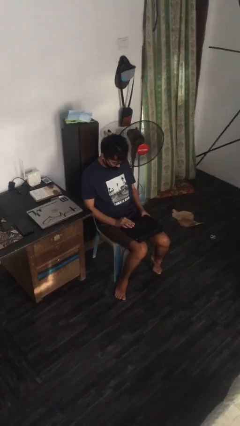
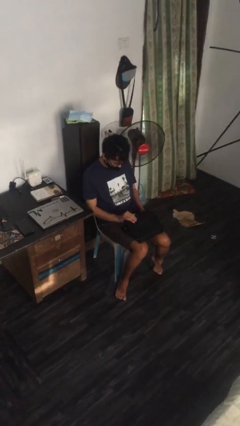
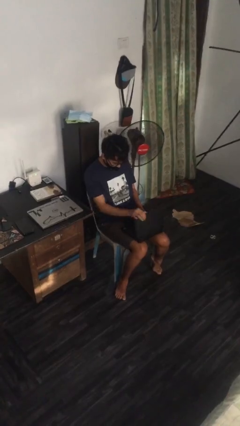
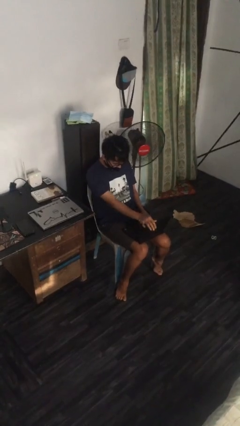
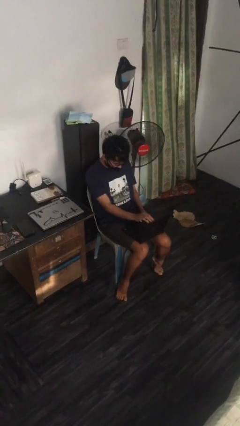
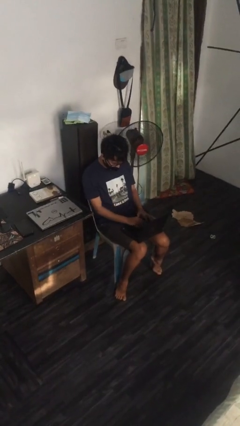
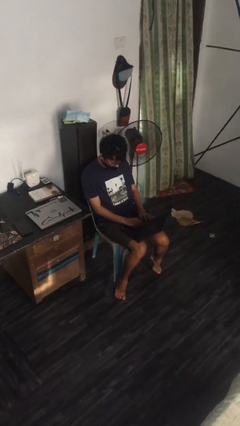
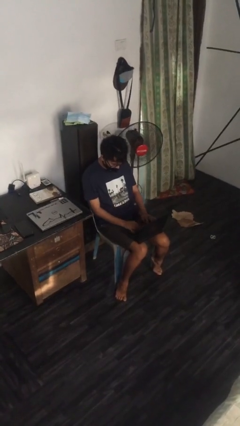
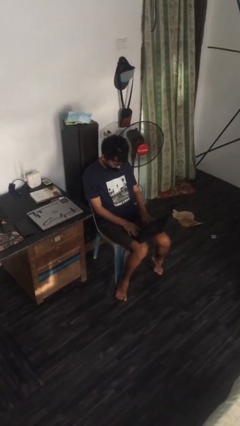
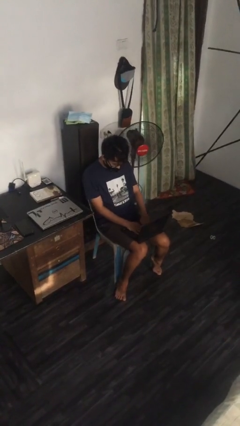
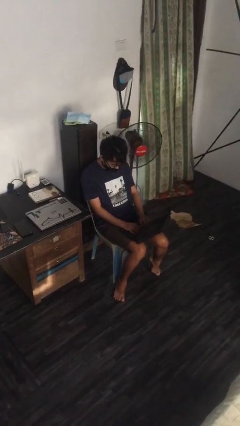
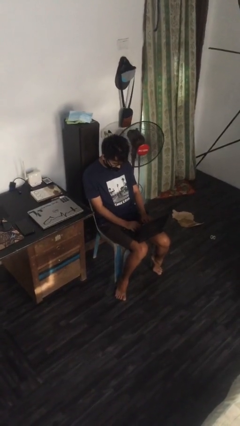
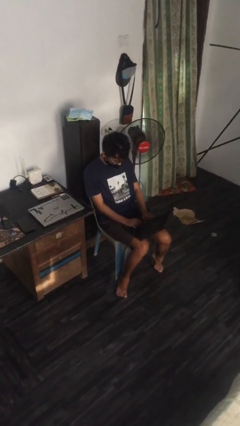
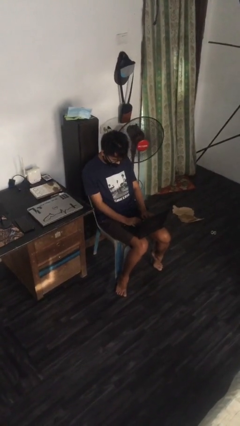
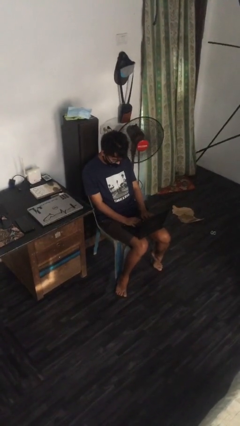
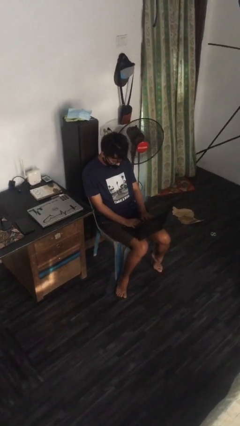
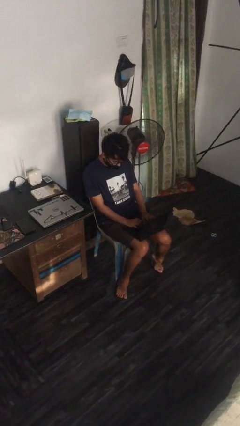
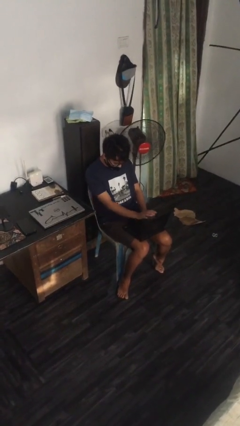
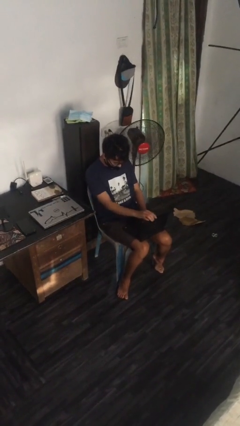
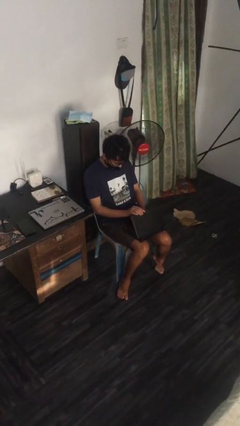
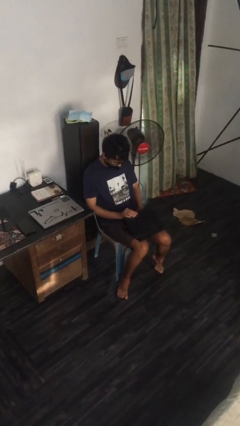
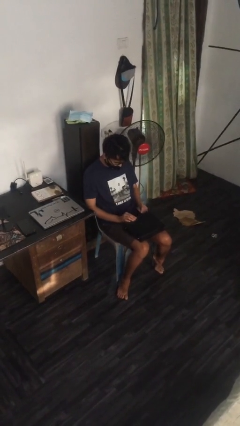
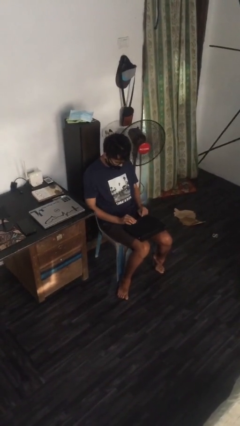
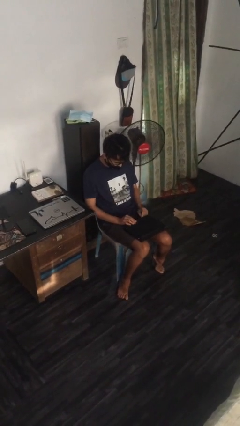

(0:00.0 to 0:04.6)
person interacts with laptop

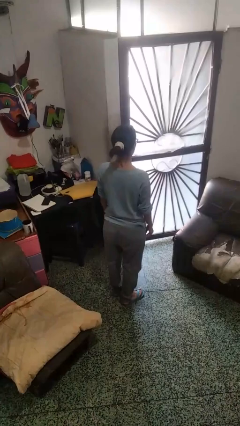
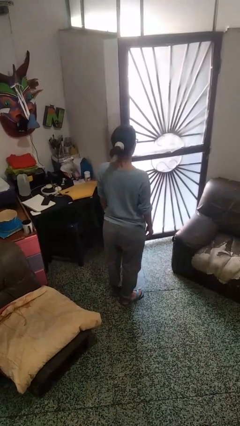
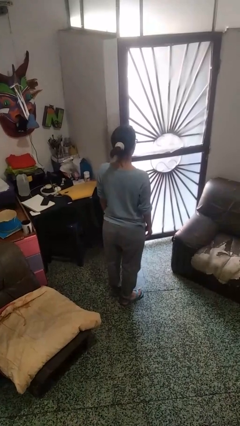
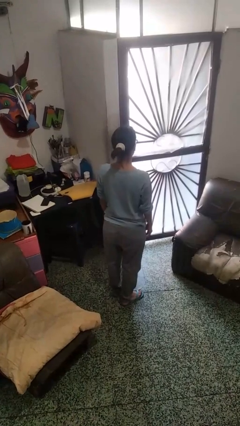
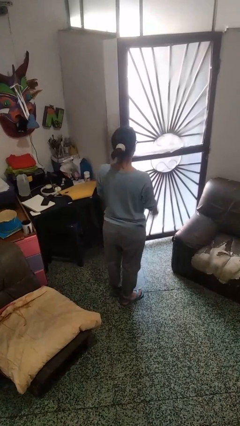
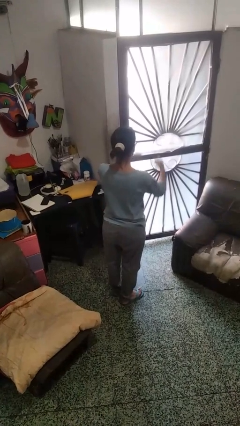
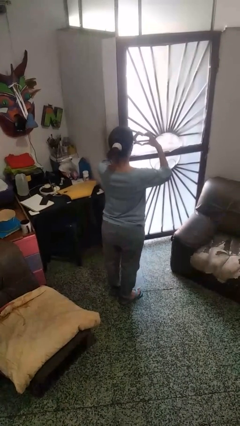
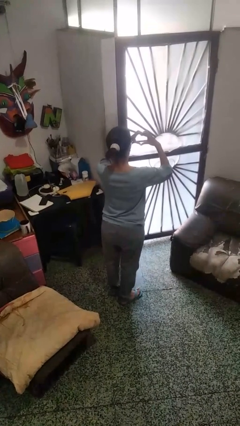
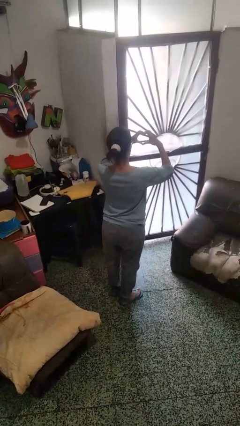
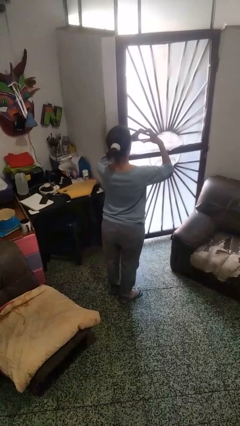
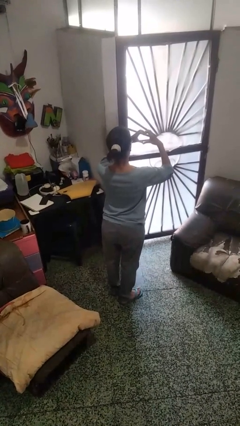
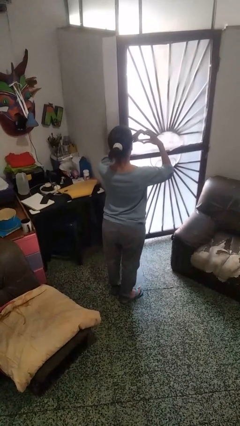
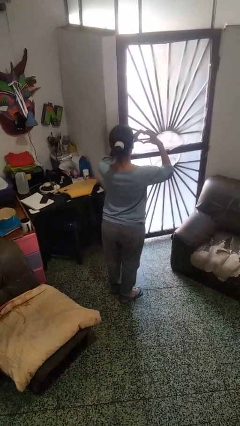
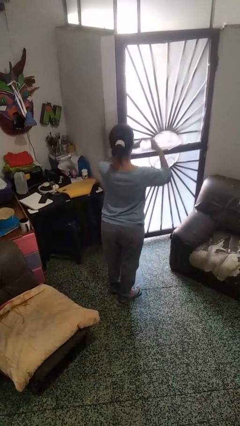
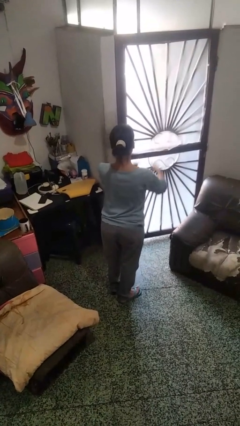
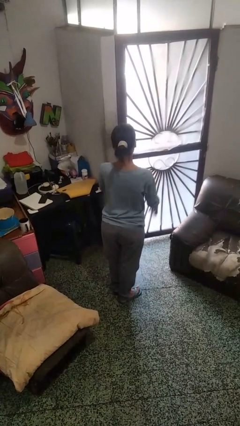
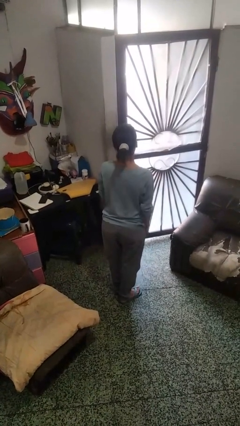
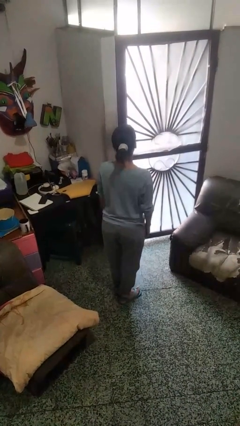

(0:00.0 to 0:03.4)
person gestures heart

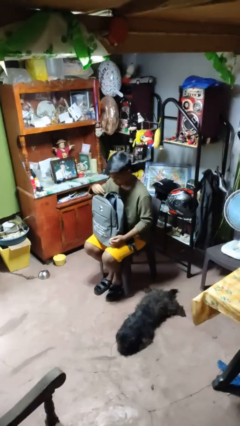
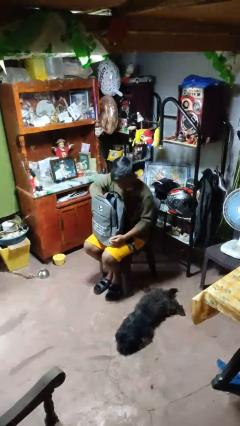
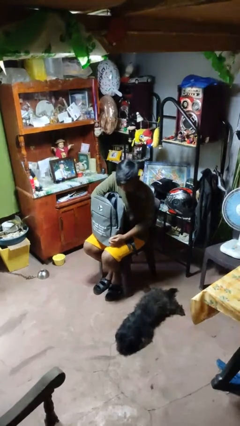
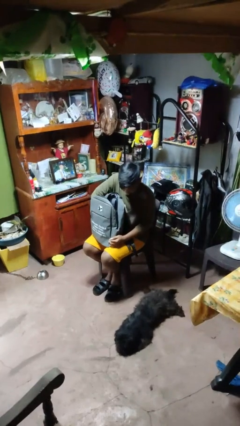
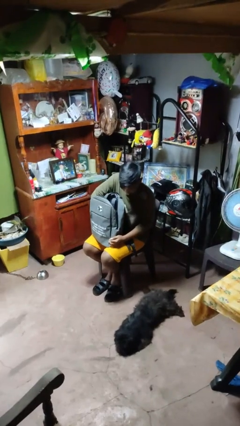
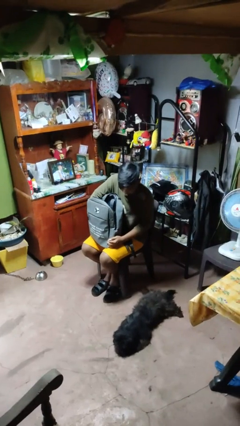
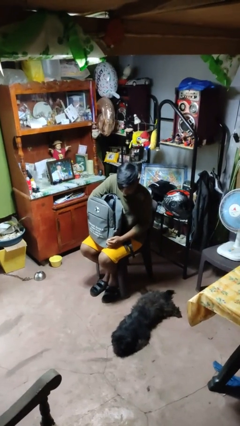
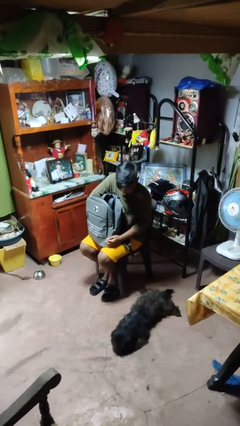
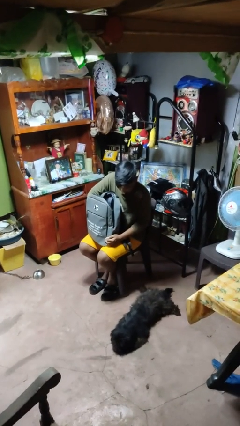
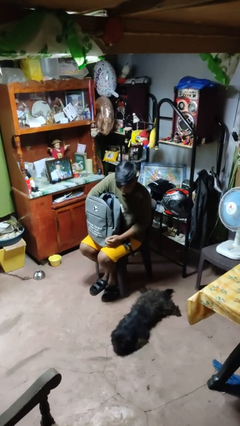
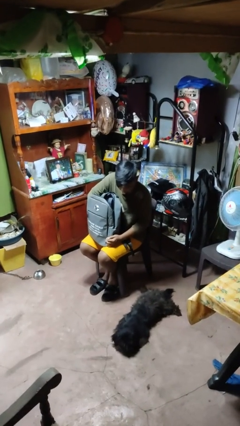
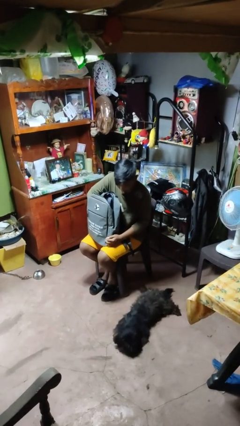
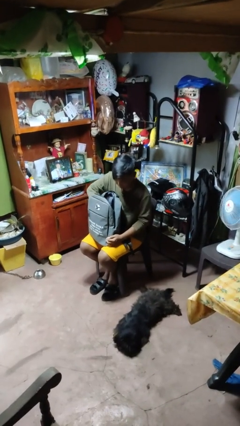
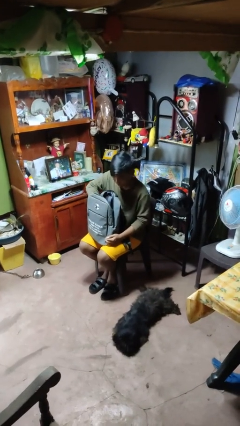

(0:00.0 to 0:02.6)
person searches in backpack

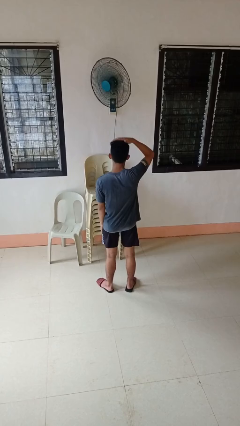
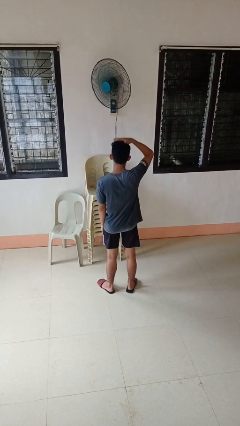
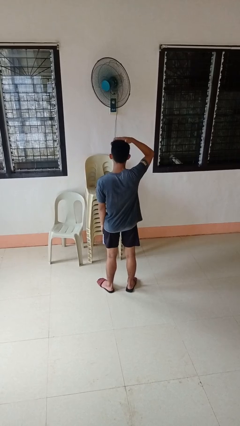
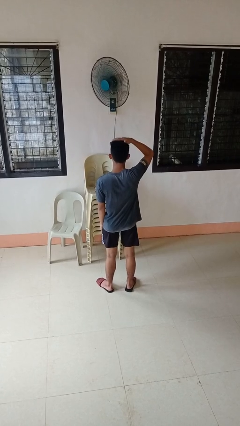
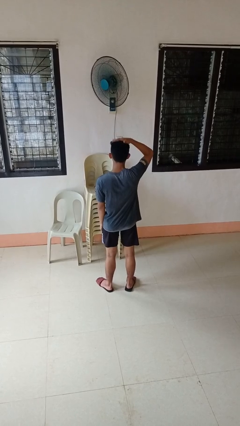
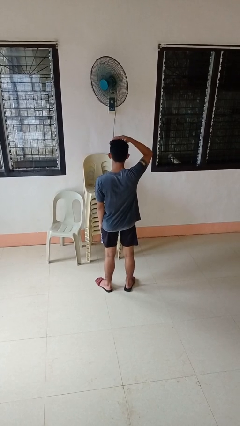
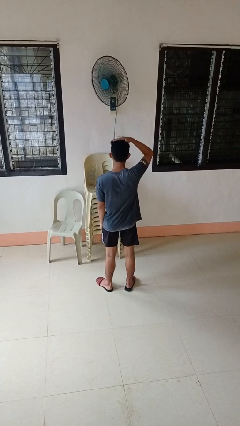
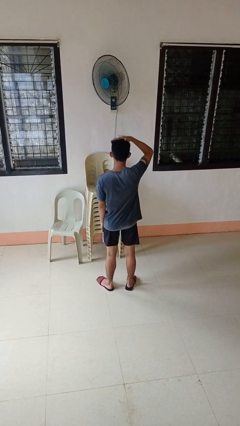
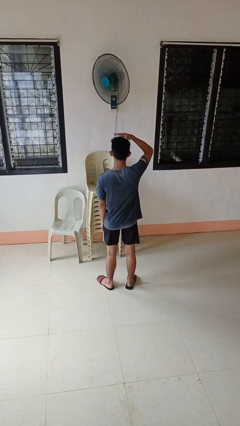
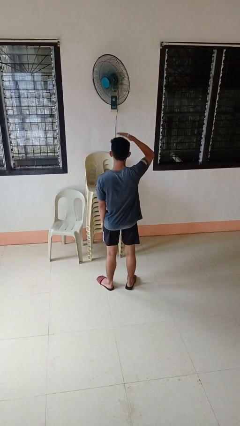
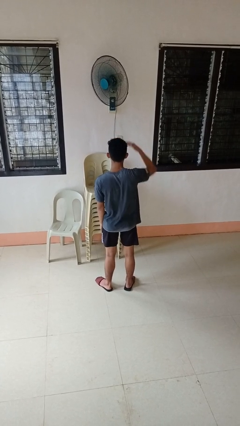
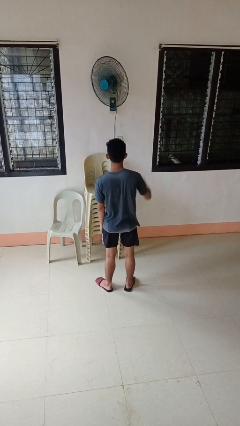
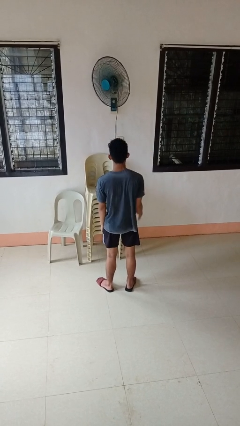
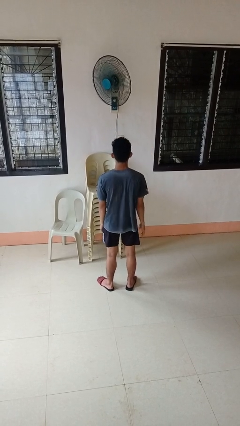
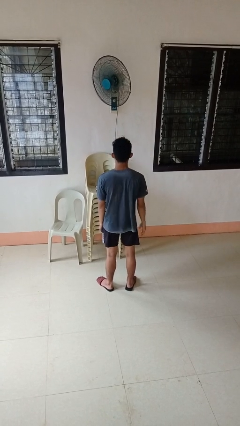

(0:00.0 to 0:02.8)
person pats head

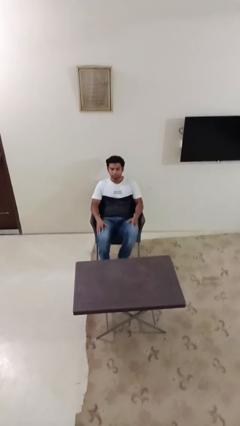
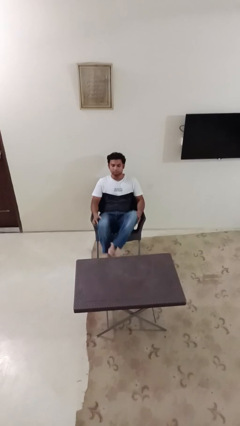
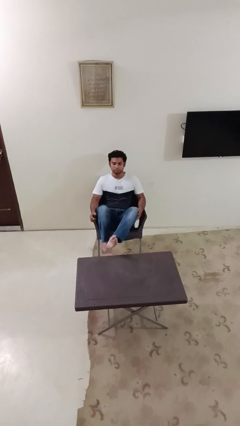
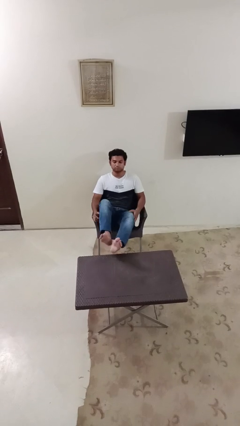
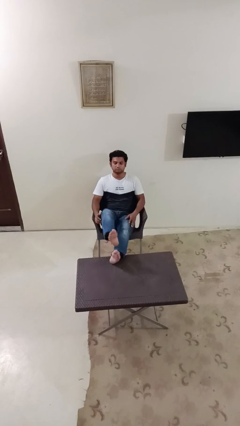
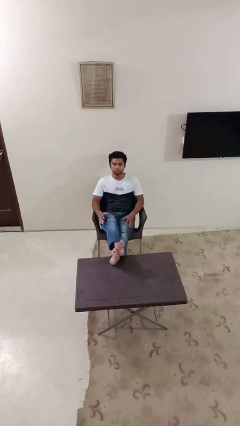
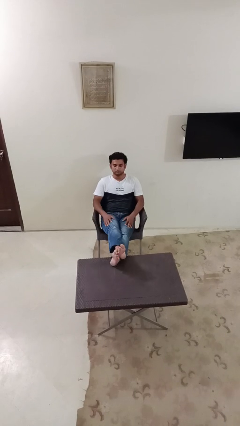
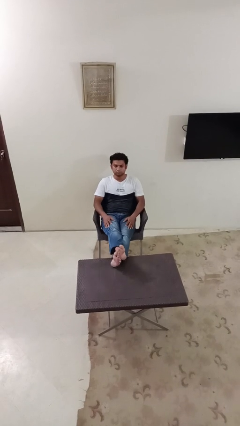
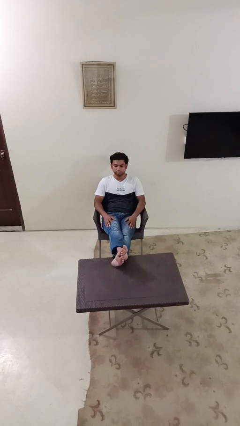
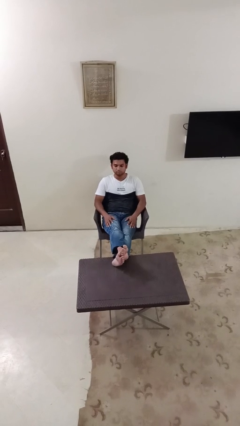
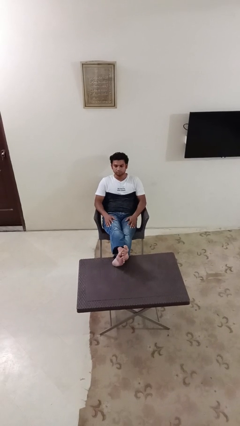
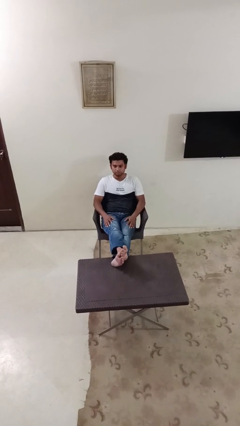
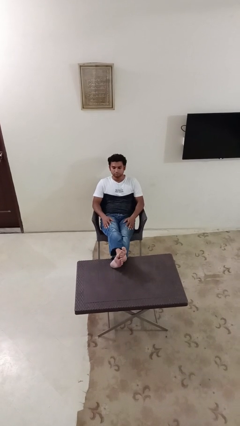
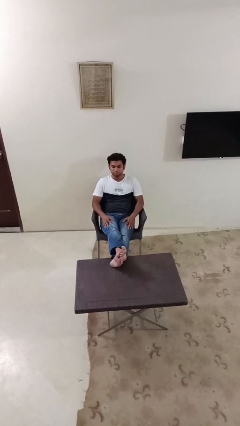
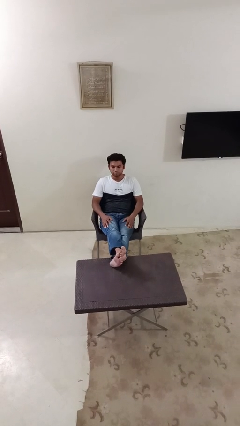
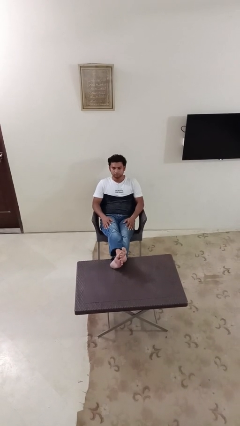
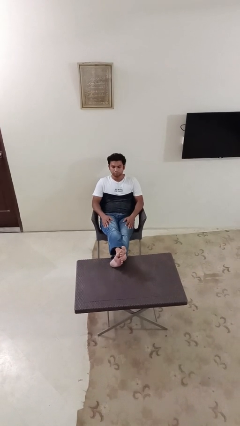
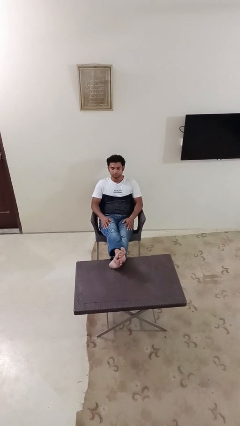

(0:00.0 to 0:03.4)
person puts feet up

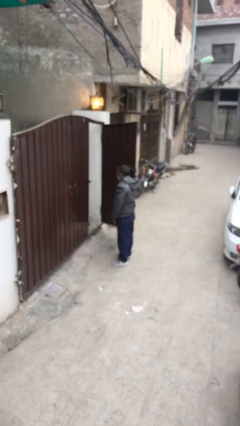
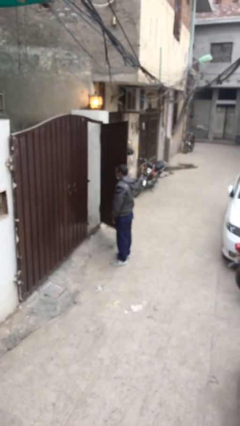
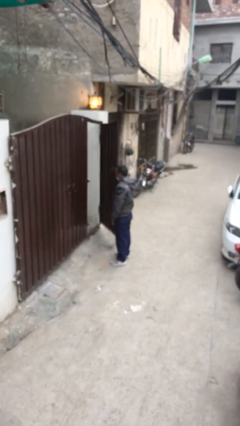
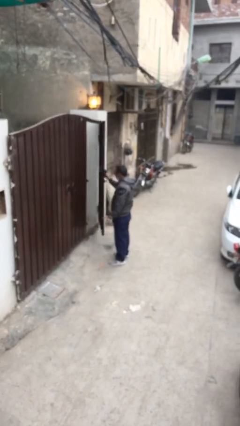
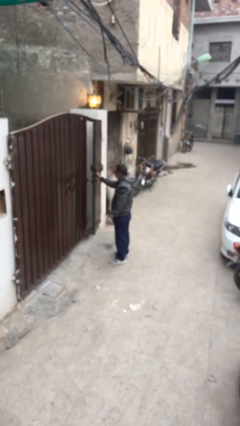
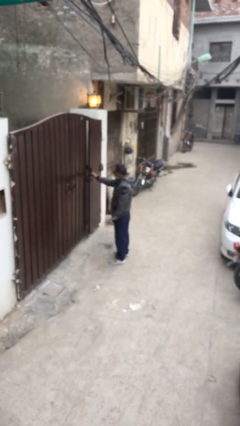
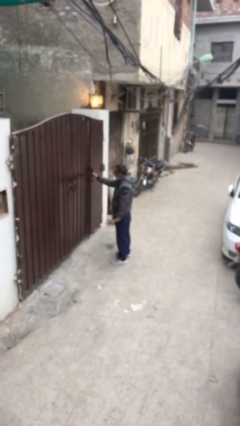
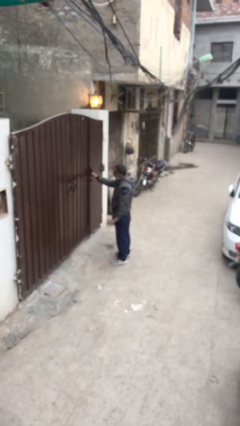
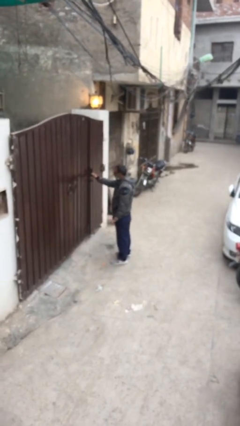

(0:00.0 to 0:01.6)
person closes facility door
